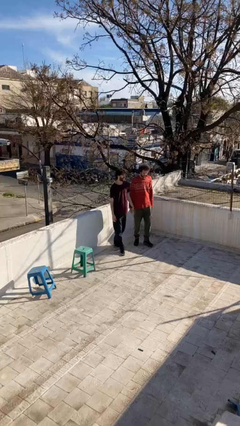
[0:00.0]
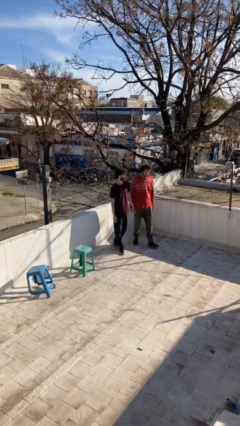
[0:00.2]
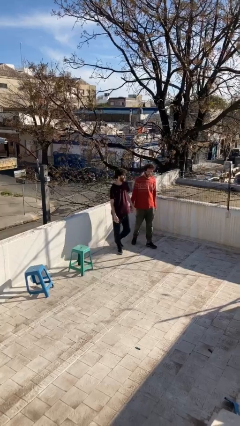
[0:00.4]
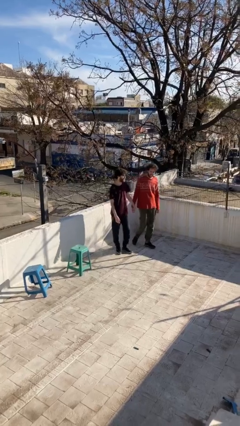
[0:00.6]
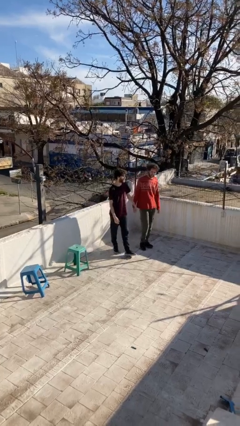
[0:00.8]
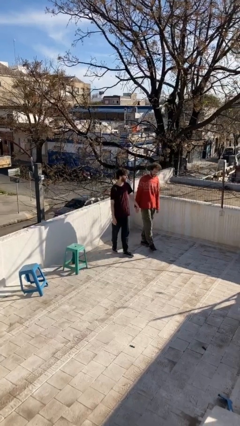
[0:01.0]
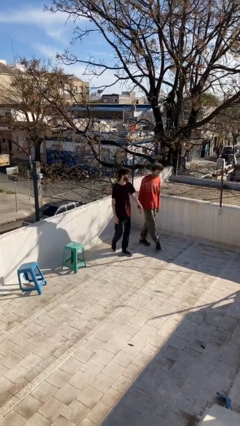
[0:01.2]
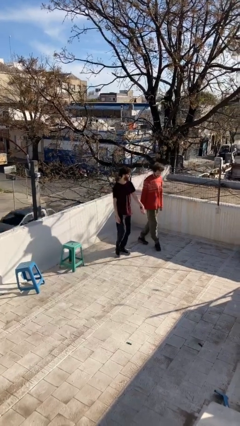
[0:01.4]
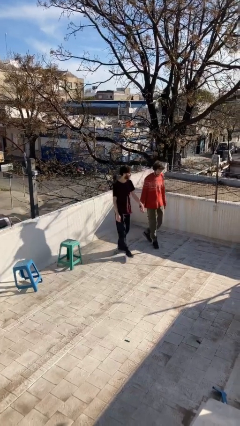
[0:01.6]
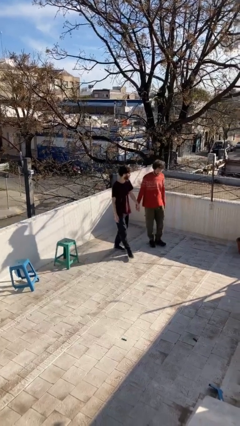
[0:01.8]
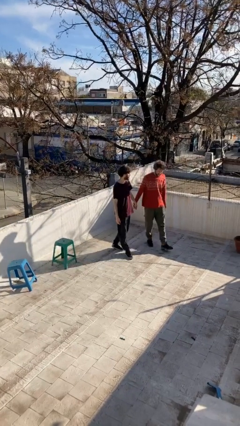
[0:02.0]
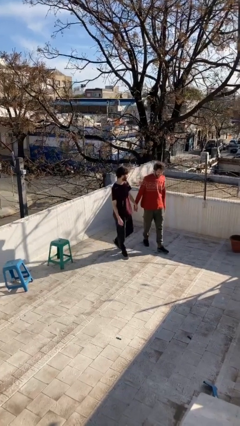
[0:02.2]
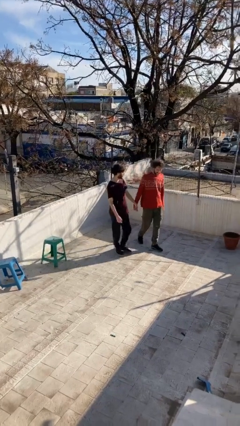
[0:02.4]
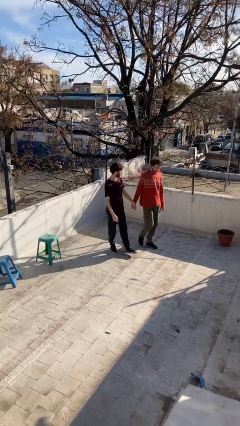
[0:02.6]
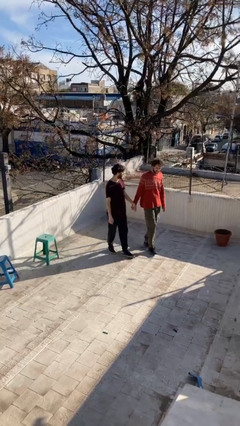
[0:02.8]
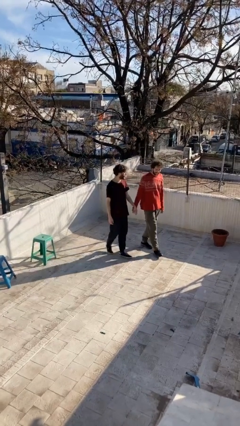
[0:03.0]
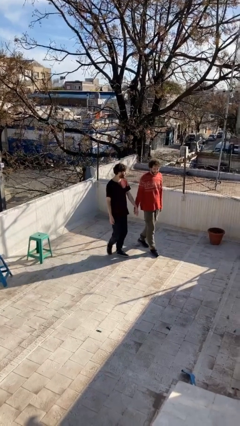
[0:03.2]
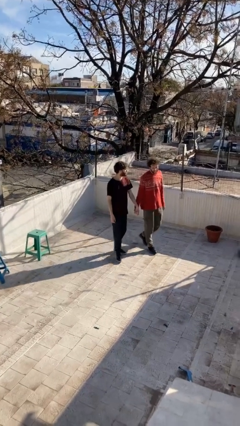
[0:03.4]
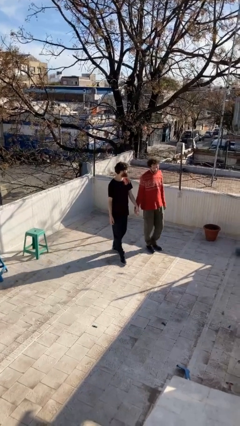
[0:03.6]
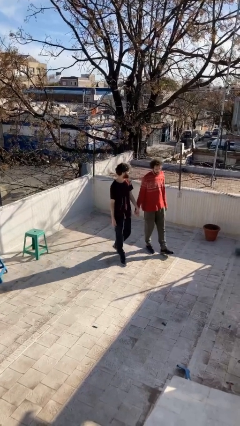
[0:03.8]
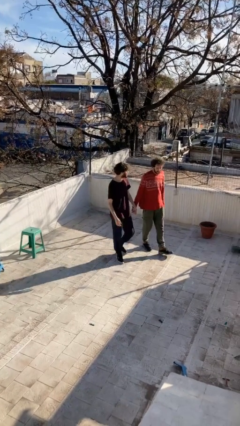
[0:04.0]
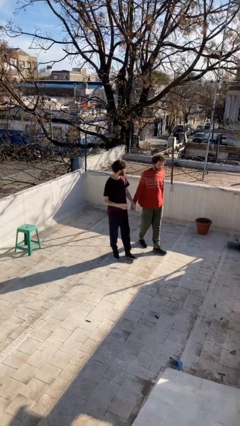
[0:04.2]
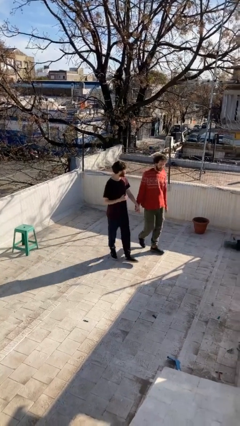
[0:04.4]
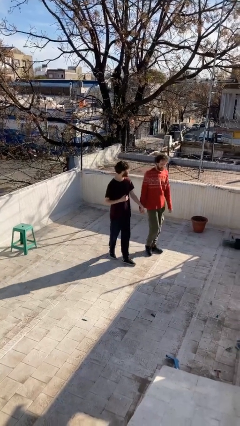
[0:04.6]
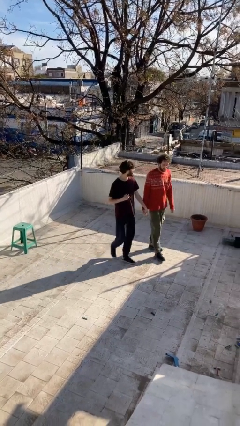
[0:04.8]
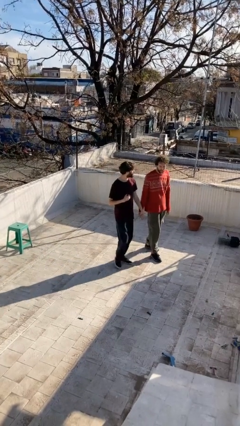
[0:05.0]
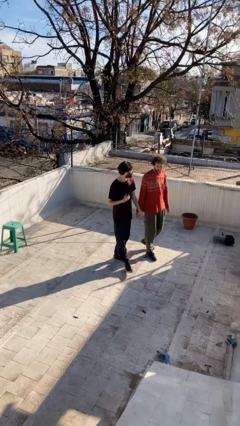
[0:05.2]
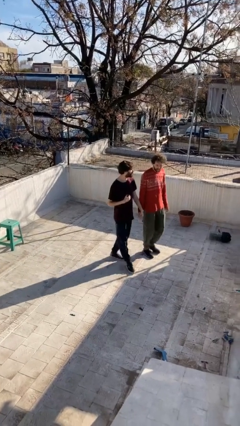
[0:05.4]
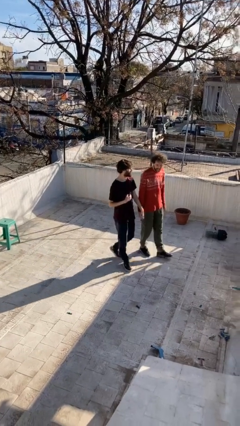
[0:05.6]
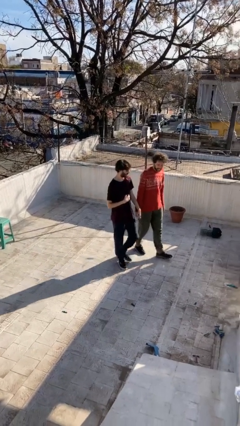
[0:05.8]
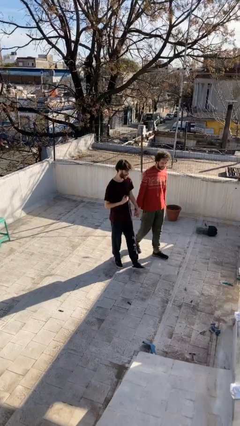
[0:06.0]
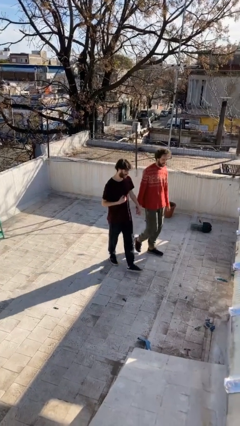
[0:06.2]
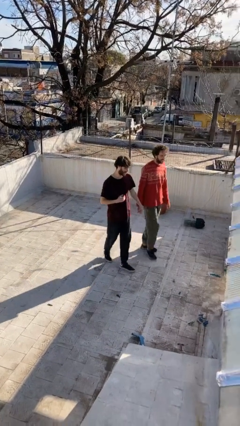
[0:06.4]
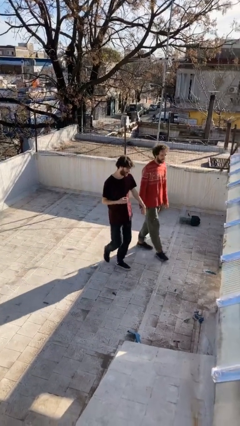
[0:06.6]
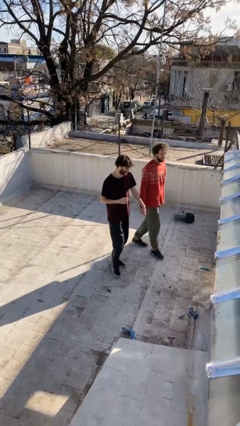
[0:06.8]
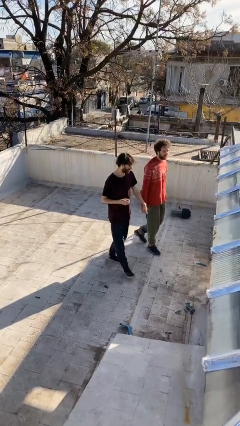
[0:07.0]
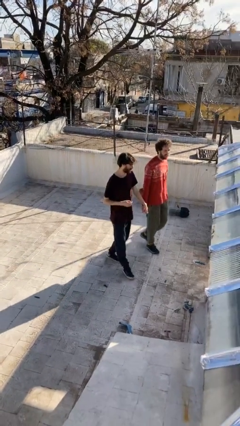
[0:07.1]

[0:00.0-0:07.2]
person holds hand

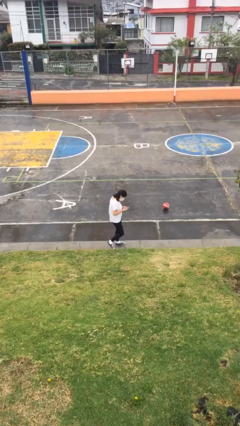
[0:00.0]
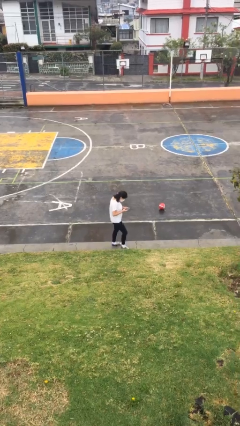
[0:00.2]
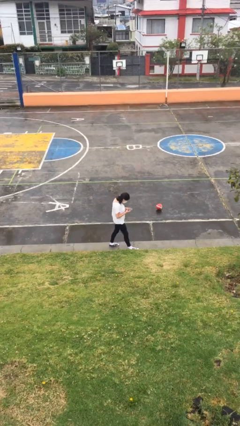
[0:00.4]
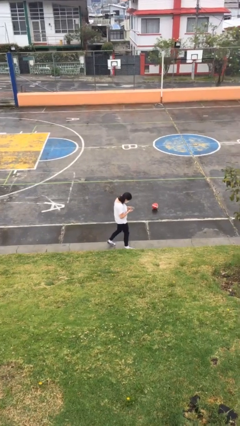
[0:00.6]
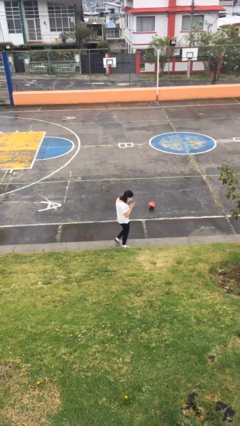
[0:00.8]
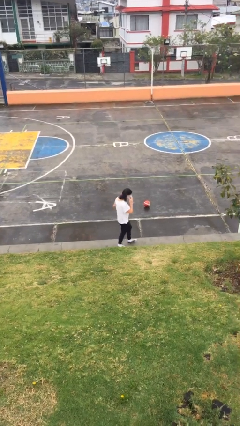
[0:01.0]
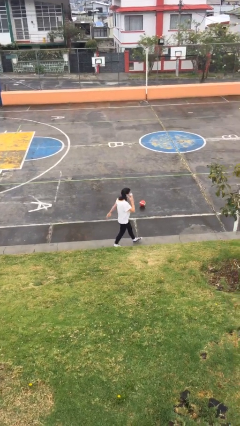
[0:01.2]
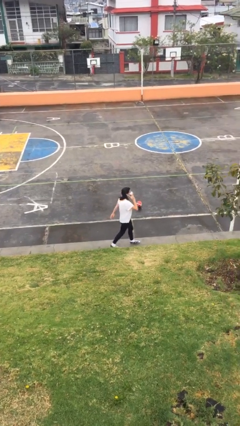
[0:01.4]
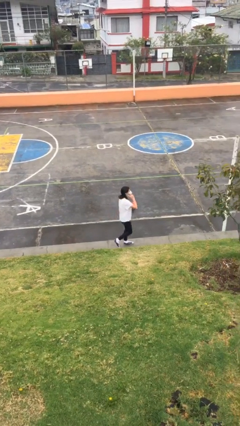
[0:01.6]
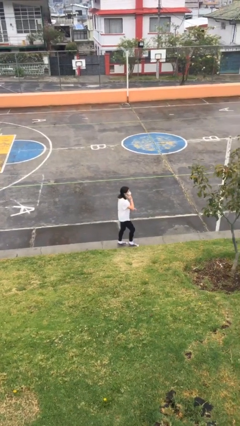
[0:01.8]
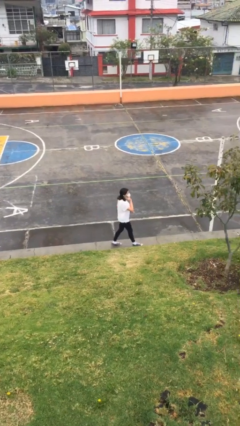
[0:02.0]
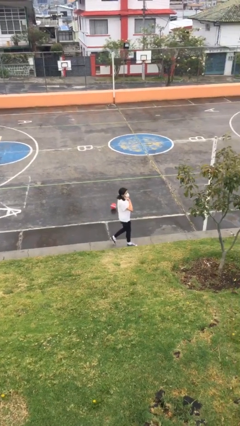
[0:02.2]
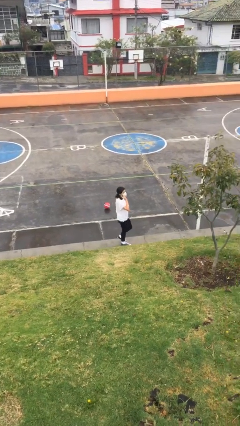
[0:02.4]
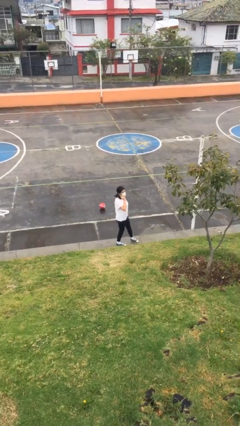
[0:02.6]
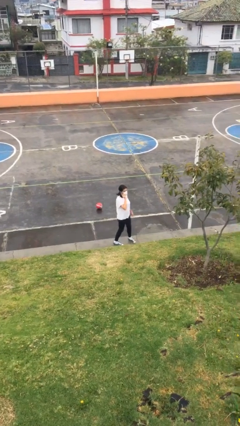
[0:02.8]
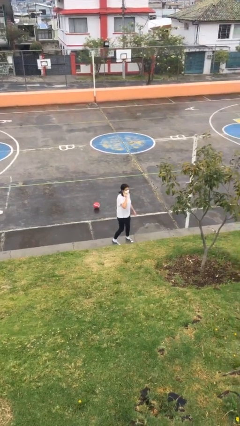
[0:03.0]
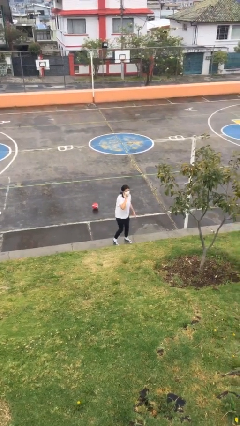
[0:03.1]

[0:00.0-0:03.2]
person talks on phone

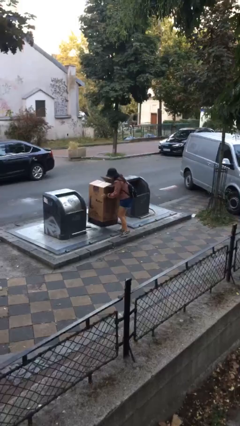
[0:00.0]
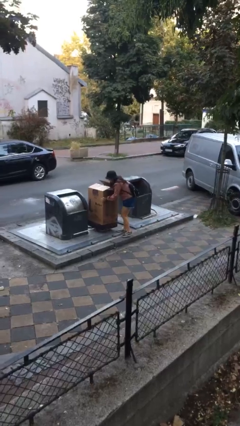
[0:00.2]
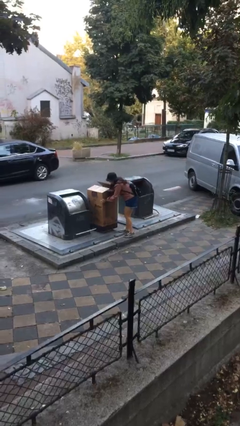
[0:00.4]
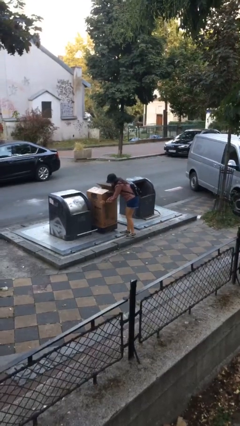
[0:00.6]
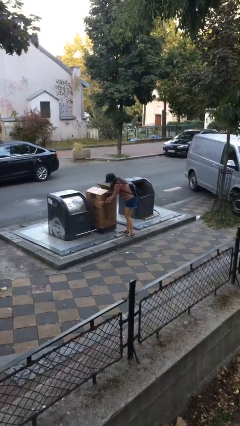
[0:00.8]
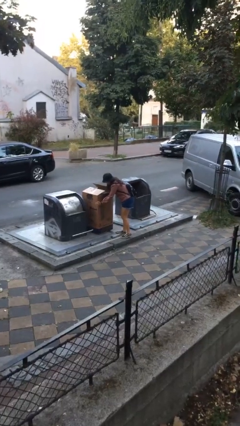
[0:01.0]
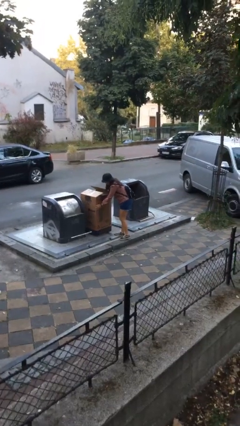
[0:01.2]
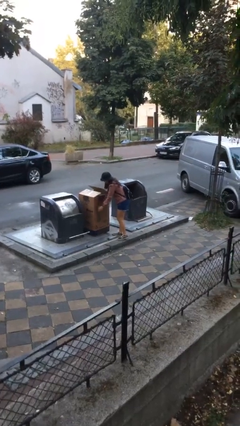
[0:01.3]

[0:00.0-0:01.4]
person puts down object on floor

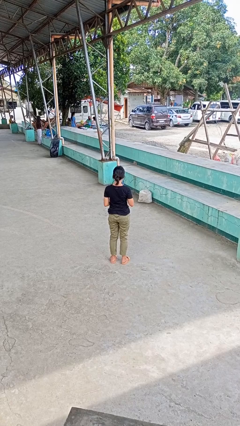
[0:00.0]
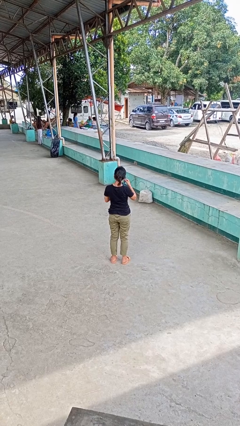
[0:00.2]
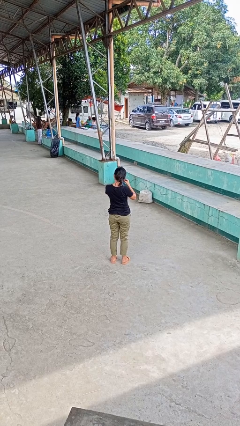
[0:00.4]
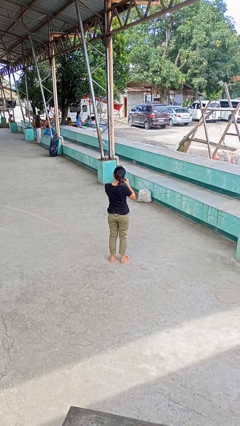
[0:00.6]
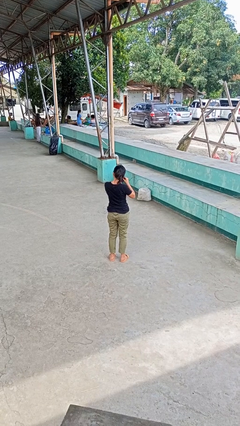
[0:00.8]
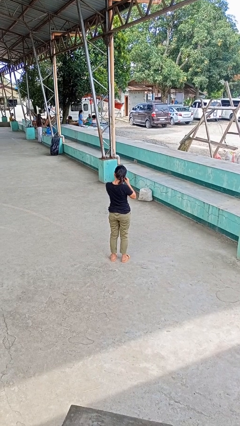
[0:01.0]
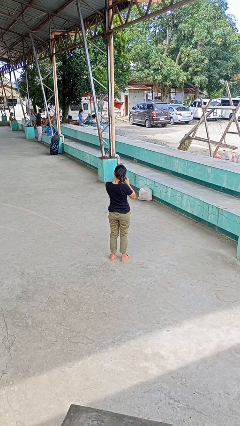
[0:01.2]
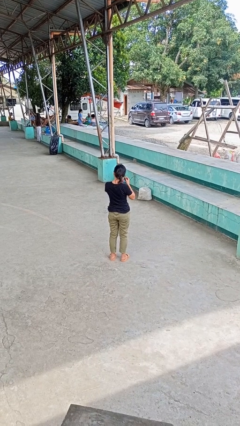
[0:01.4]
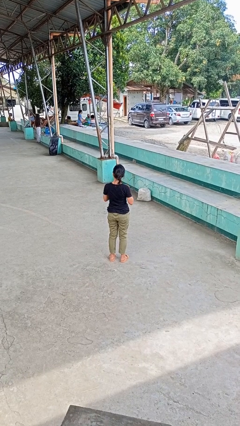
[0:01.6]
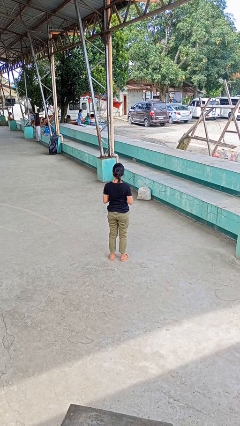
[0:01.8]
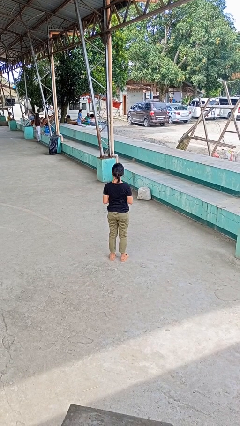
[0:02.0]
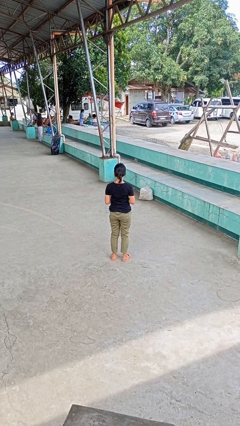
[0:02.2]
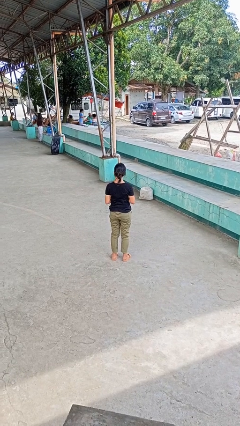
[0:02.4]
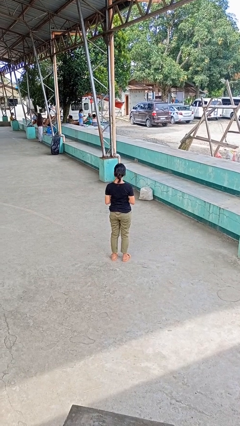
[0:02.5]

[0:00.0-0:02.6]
person takes off earrings

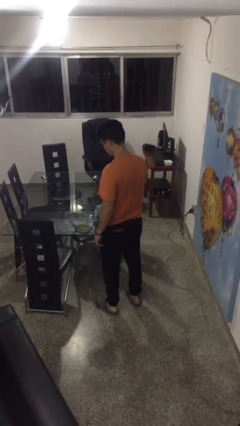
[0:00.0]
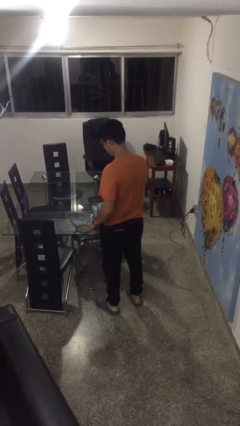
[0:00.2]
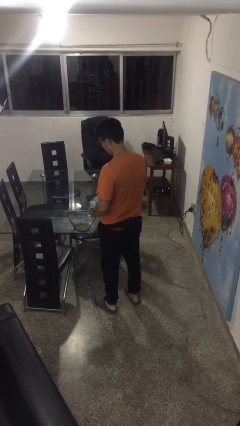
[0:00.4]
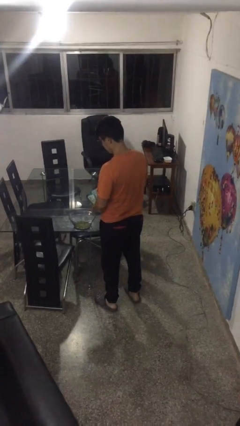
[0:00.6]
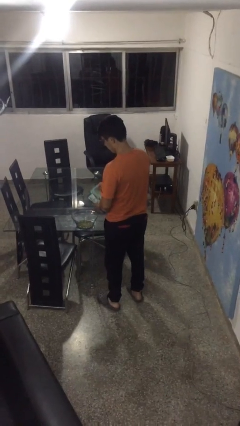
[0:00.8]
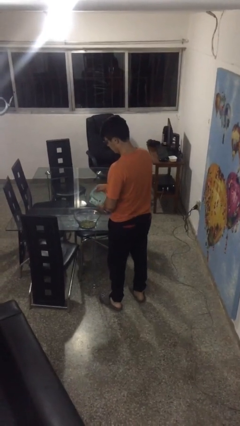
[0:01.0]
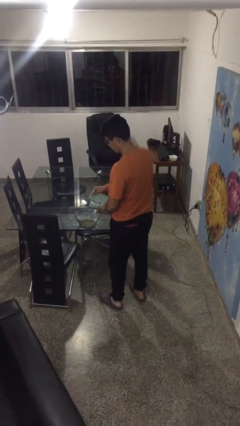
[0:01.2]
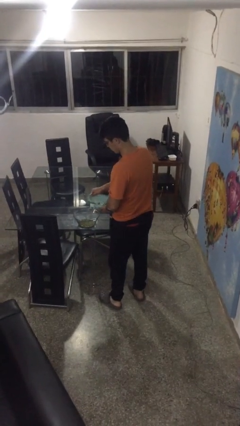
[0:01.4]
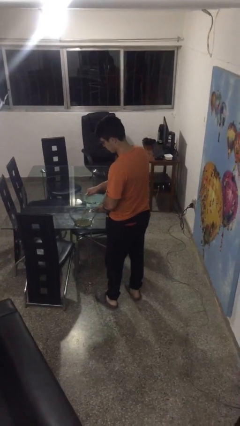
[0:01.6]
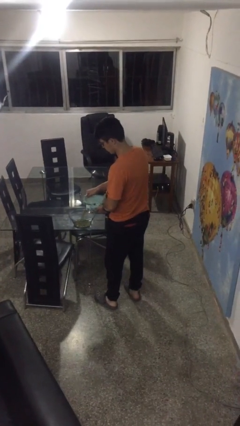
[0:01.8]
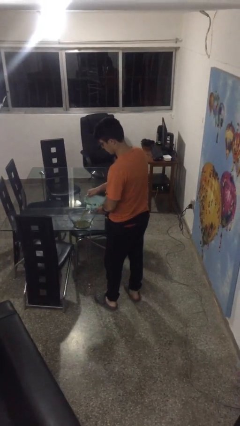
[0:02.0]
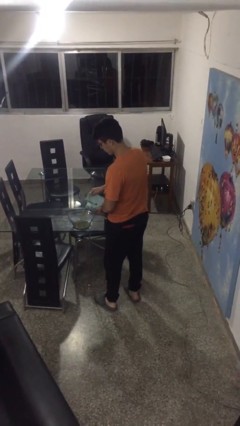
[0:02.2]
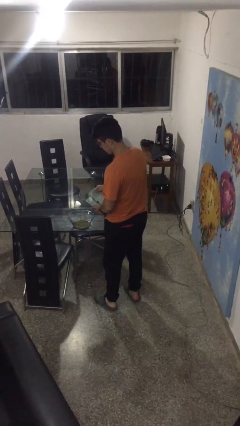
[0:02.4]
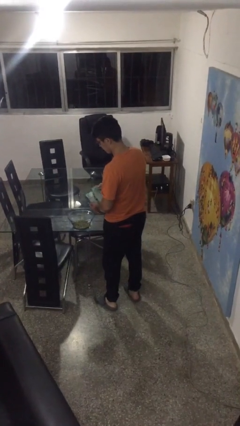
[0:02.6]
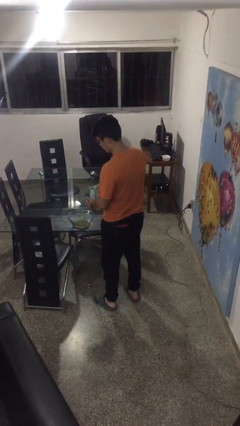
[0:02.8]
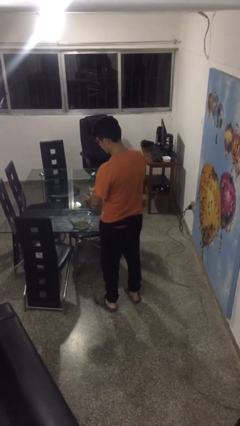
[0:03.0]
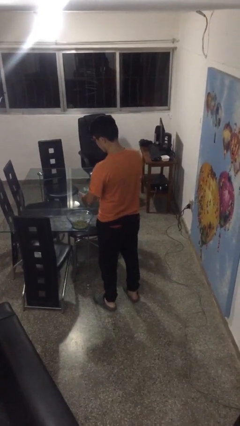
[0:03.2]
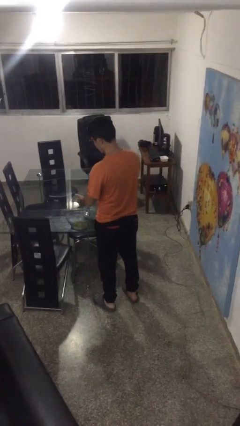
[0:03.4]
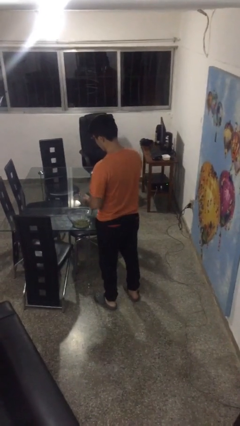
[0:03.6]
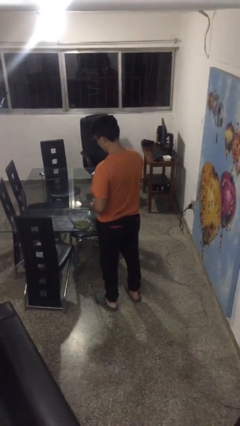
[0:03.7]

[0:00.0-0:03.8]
person pours into bowl
